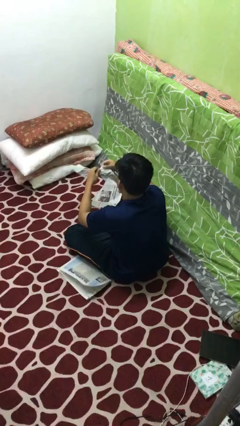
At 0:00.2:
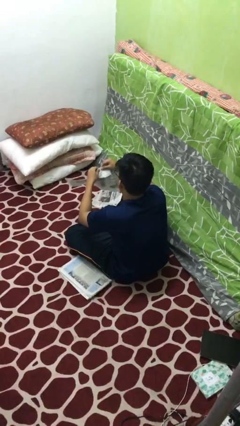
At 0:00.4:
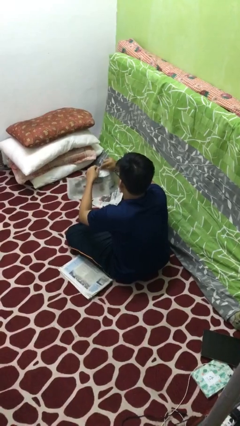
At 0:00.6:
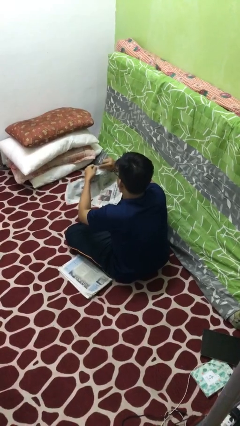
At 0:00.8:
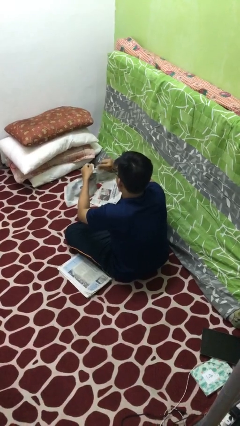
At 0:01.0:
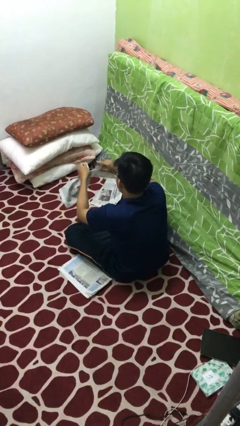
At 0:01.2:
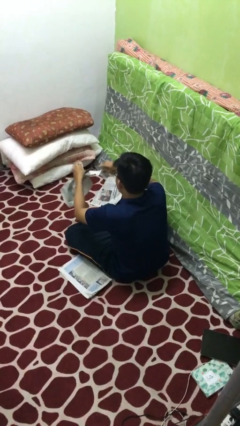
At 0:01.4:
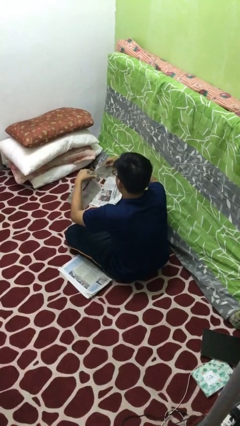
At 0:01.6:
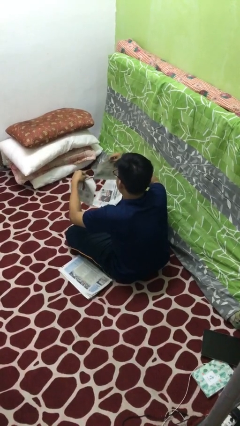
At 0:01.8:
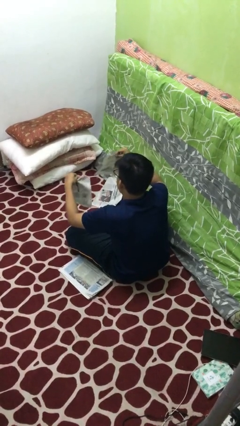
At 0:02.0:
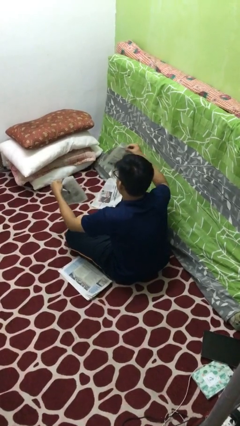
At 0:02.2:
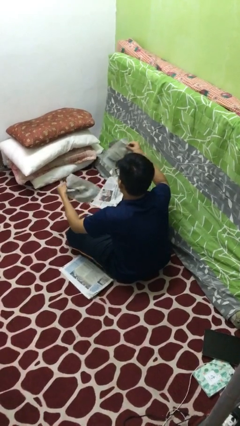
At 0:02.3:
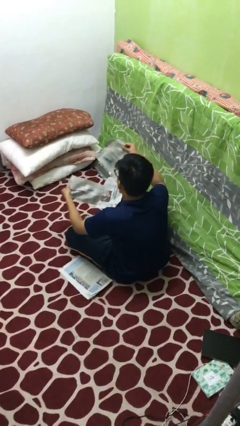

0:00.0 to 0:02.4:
person tears paper

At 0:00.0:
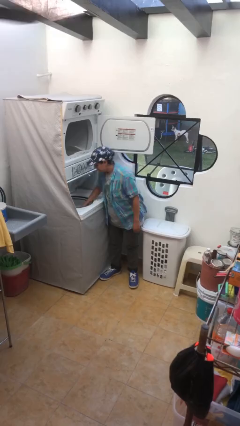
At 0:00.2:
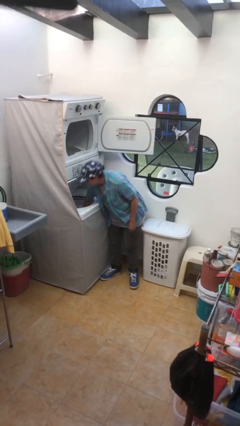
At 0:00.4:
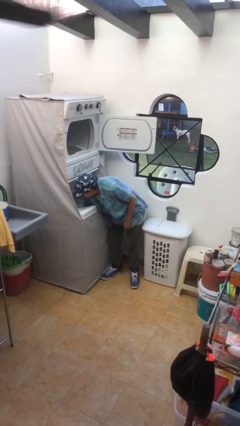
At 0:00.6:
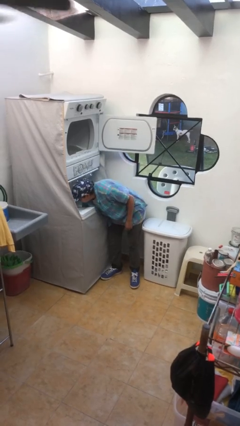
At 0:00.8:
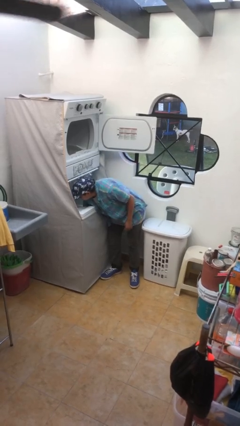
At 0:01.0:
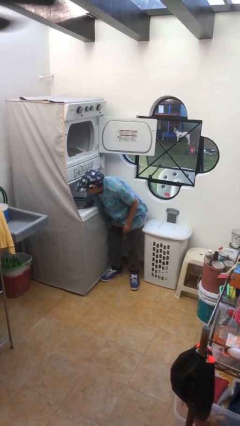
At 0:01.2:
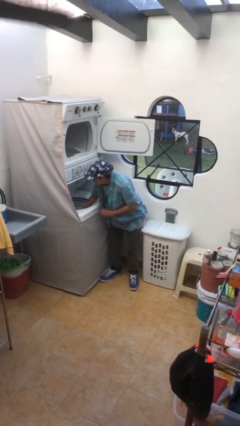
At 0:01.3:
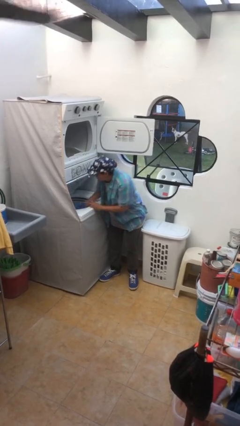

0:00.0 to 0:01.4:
person unloads clotheswasher

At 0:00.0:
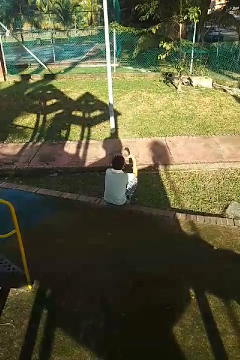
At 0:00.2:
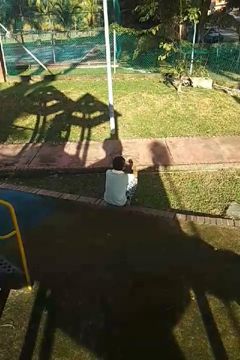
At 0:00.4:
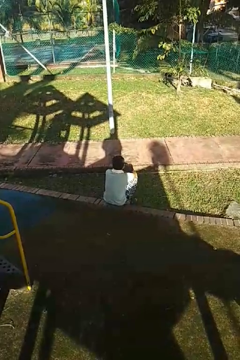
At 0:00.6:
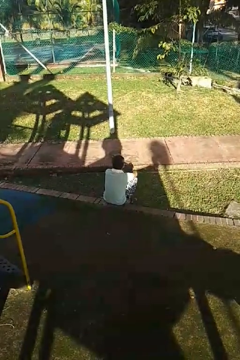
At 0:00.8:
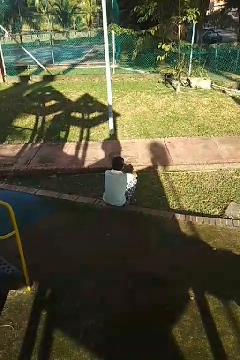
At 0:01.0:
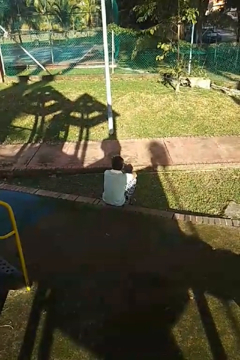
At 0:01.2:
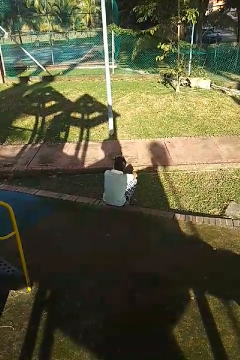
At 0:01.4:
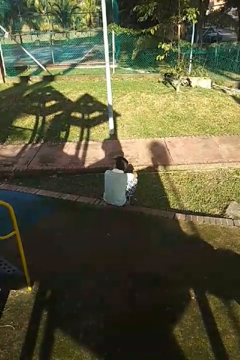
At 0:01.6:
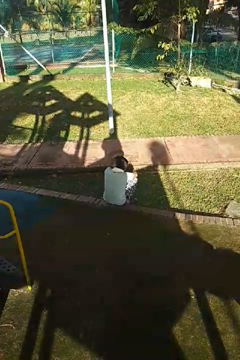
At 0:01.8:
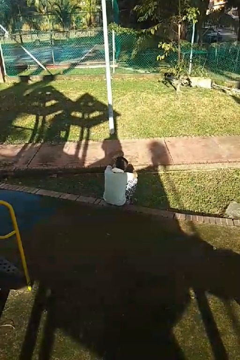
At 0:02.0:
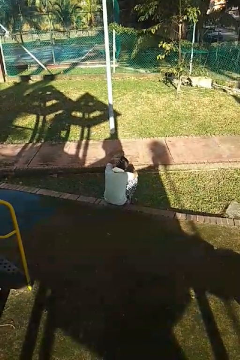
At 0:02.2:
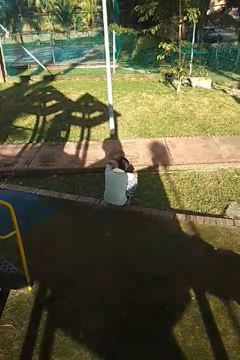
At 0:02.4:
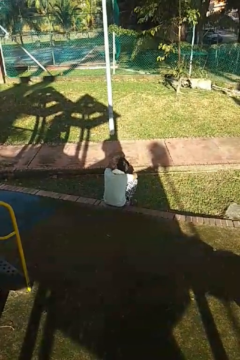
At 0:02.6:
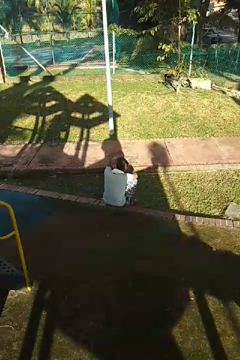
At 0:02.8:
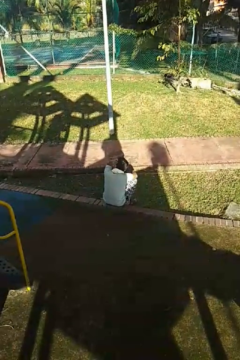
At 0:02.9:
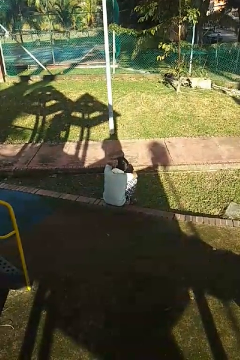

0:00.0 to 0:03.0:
person strokes hair

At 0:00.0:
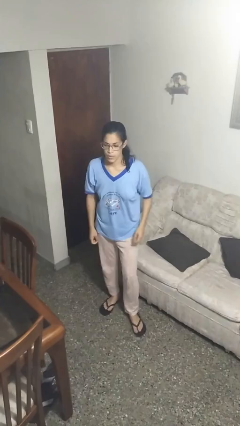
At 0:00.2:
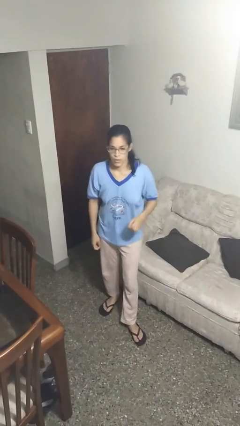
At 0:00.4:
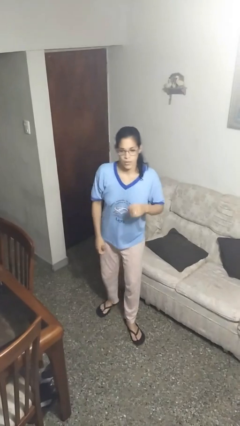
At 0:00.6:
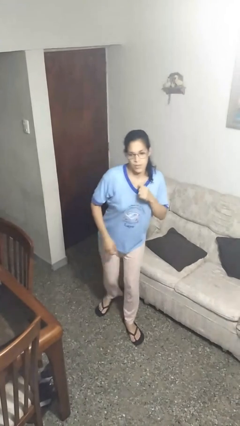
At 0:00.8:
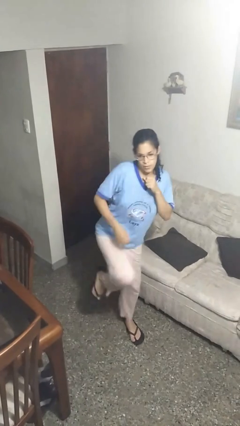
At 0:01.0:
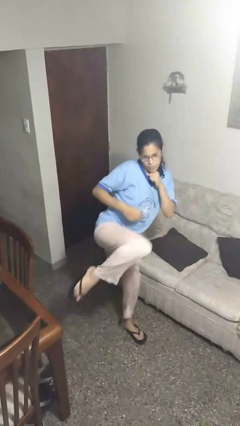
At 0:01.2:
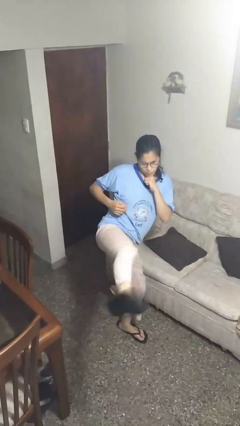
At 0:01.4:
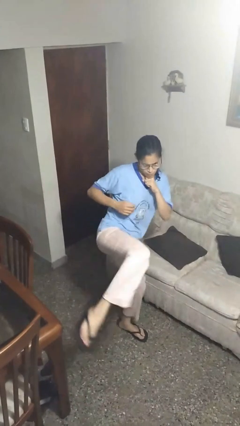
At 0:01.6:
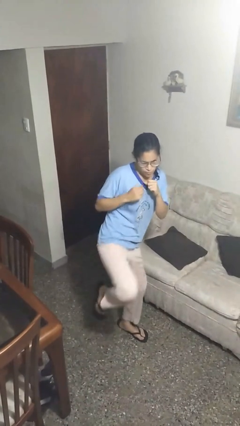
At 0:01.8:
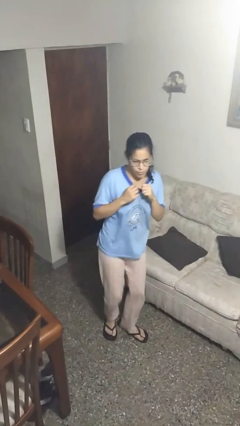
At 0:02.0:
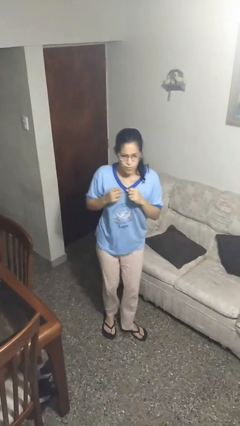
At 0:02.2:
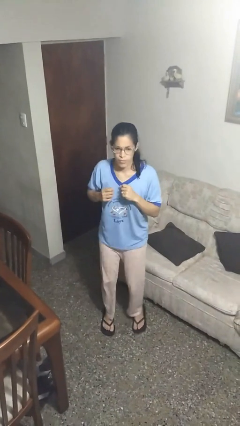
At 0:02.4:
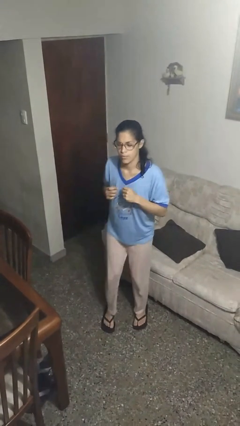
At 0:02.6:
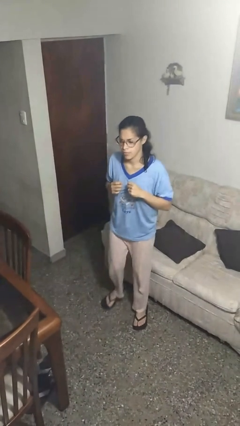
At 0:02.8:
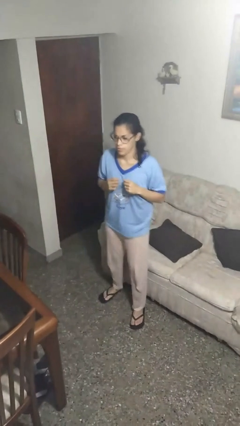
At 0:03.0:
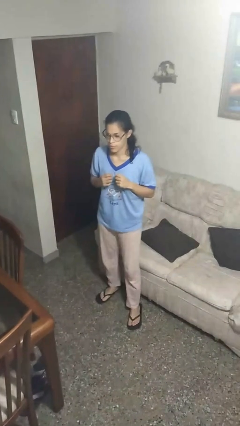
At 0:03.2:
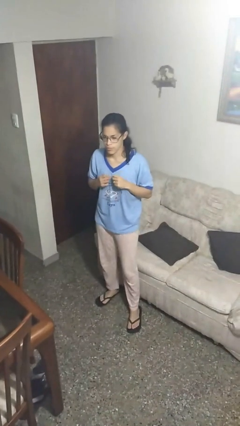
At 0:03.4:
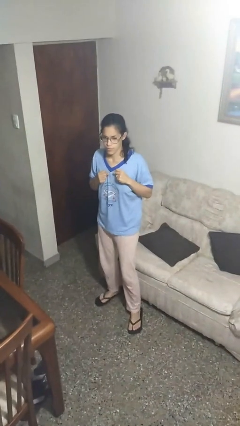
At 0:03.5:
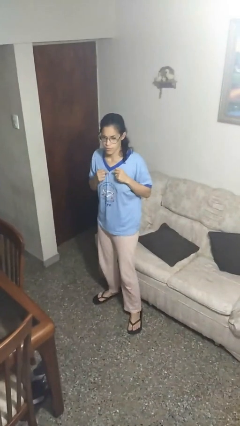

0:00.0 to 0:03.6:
person karate kicks

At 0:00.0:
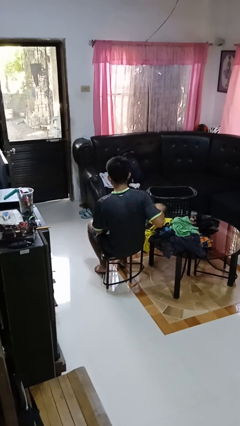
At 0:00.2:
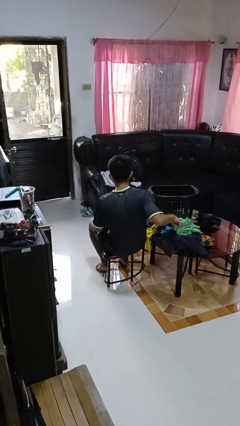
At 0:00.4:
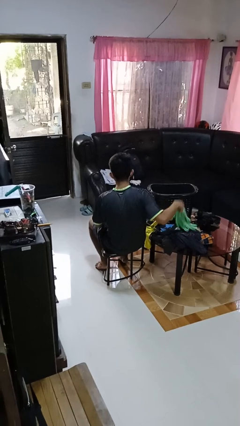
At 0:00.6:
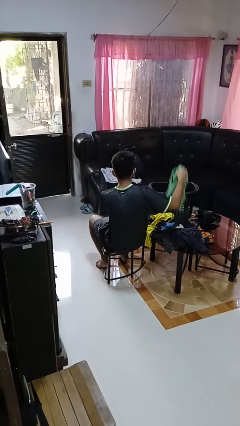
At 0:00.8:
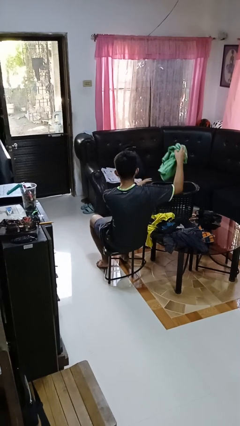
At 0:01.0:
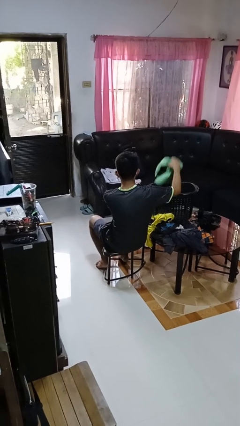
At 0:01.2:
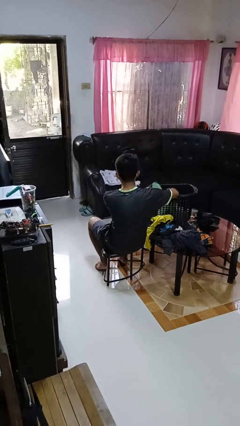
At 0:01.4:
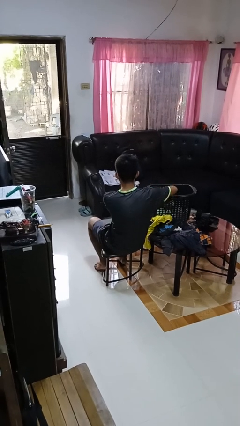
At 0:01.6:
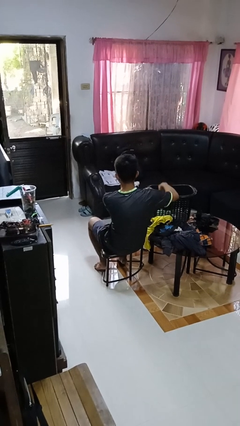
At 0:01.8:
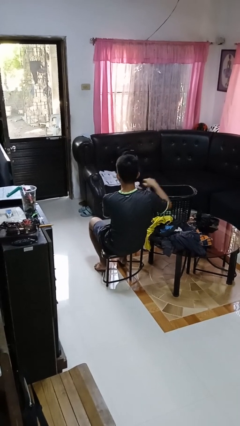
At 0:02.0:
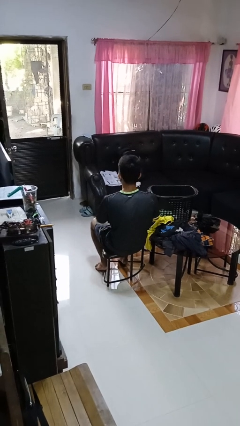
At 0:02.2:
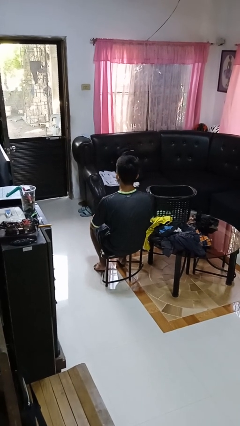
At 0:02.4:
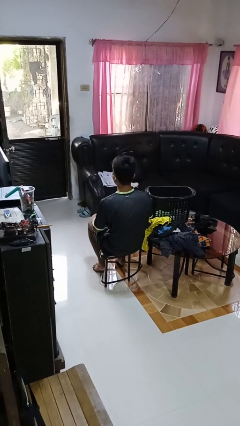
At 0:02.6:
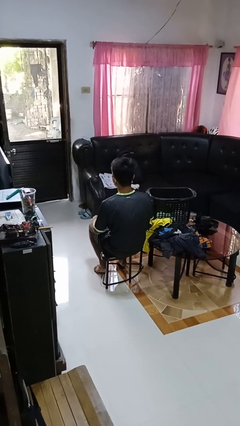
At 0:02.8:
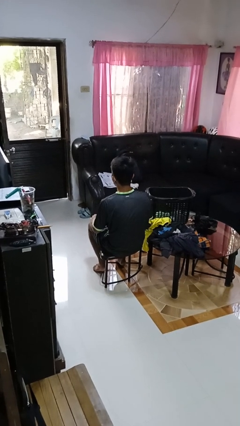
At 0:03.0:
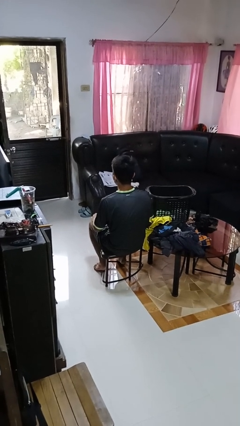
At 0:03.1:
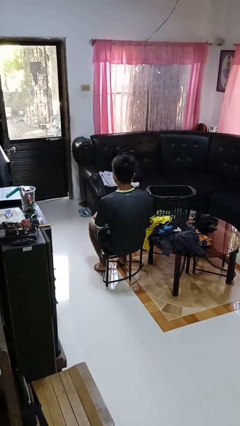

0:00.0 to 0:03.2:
person puts object into basket

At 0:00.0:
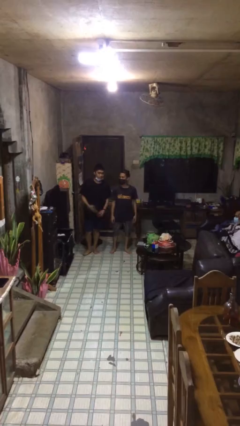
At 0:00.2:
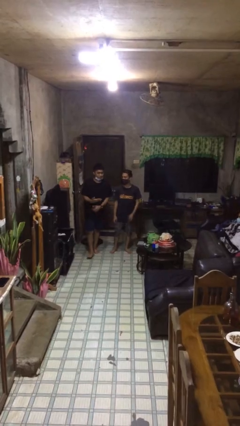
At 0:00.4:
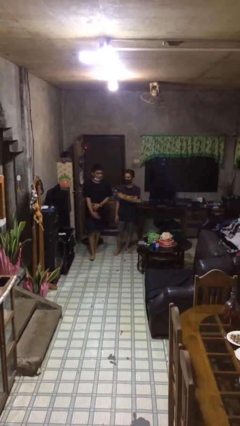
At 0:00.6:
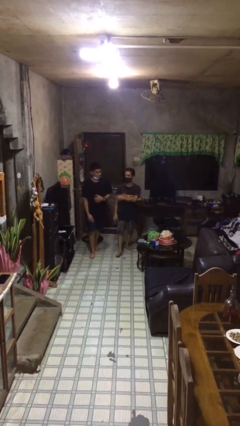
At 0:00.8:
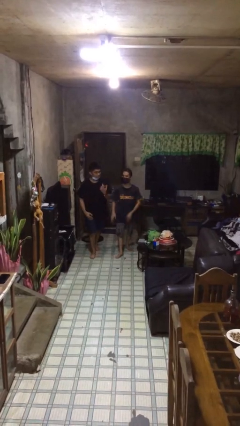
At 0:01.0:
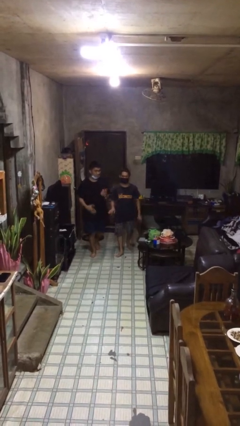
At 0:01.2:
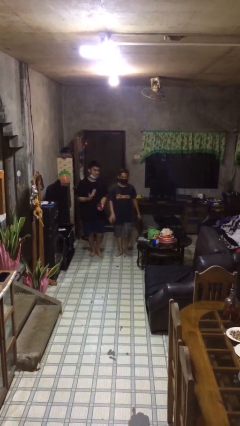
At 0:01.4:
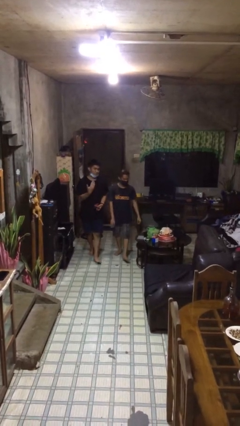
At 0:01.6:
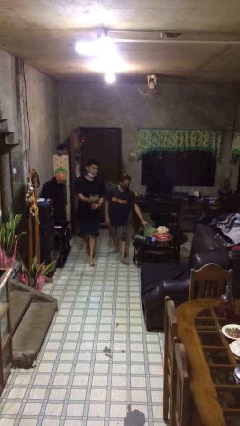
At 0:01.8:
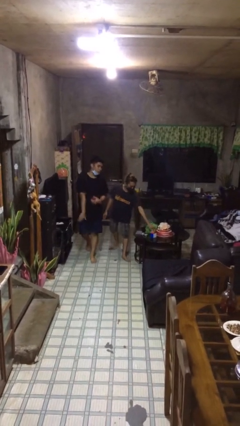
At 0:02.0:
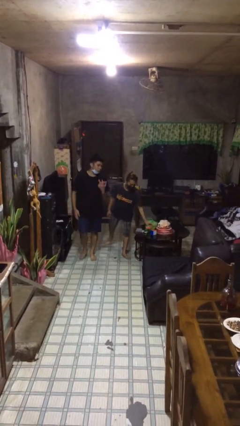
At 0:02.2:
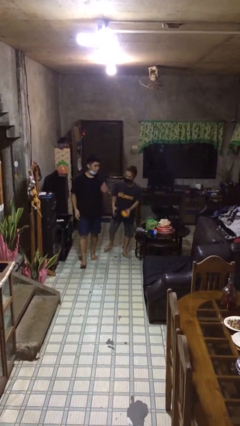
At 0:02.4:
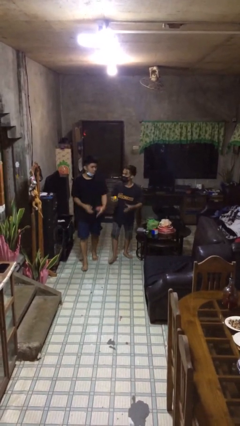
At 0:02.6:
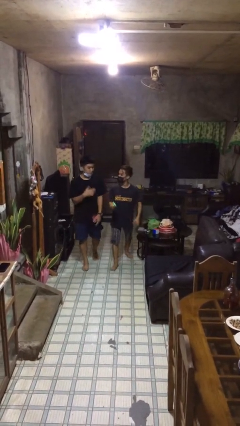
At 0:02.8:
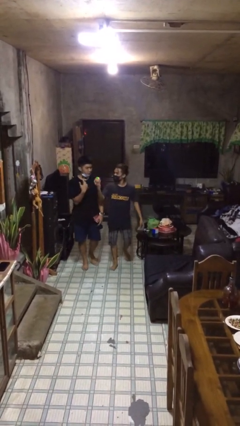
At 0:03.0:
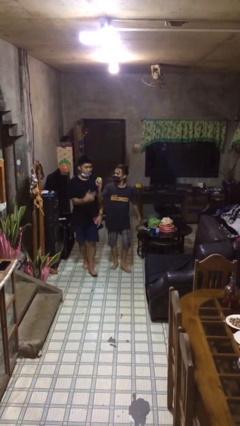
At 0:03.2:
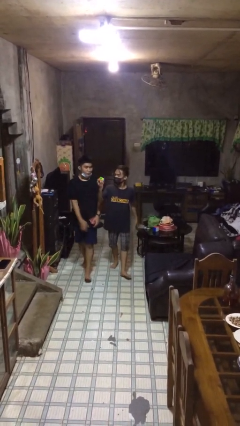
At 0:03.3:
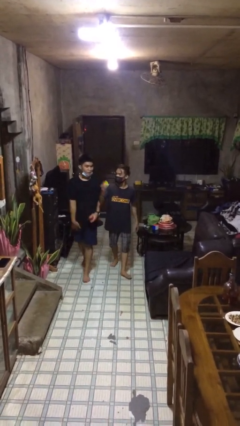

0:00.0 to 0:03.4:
person talks to person

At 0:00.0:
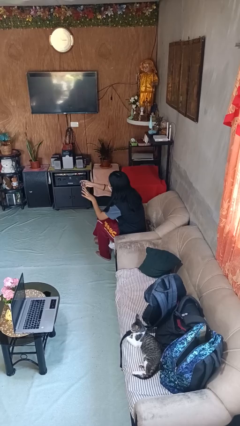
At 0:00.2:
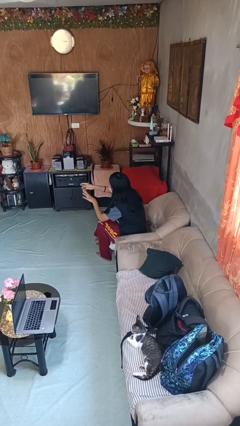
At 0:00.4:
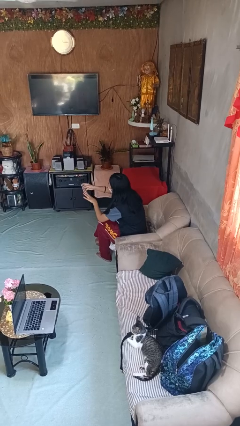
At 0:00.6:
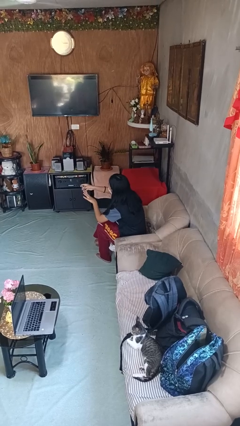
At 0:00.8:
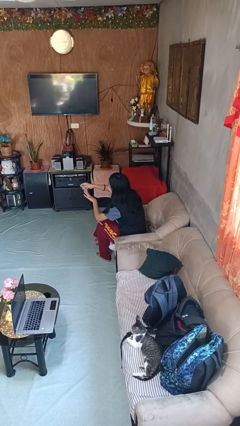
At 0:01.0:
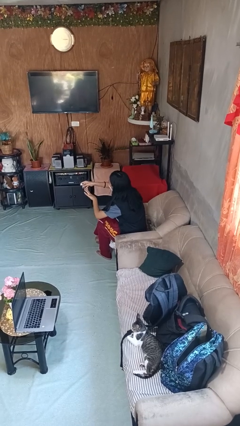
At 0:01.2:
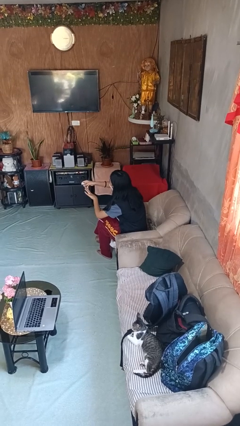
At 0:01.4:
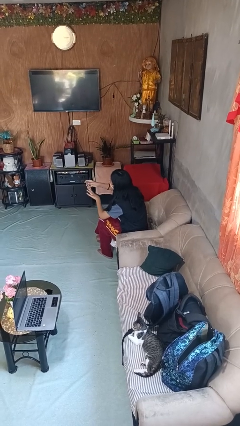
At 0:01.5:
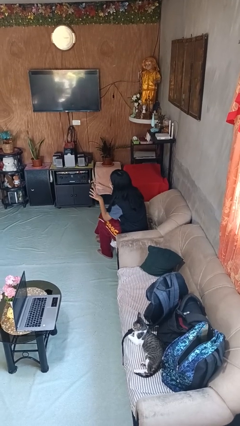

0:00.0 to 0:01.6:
person clips fingernails
